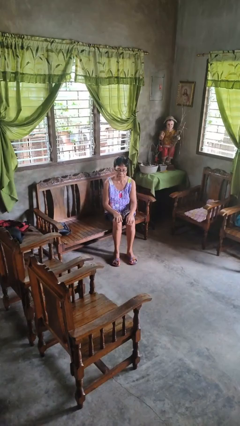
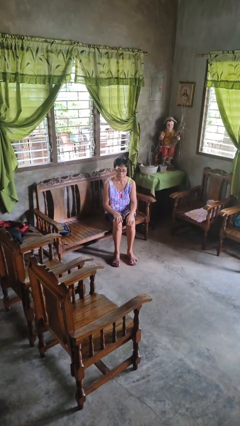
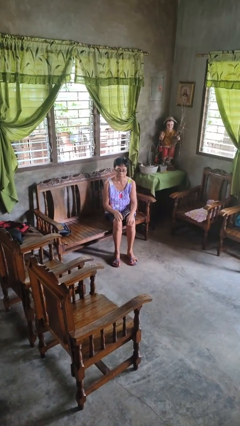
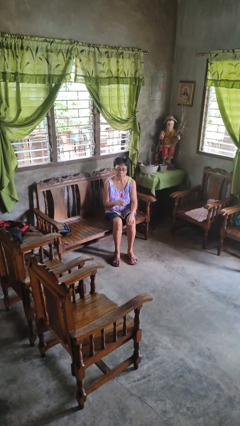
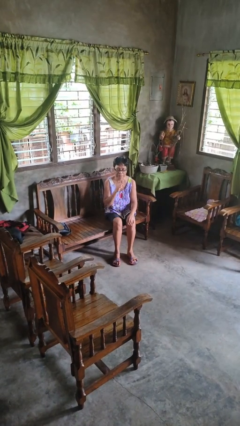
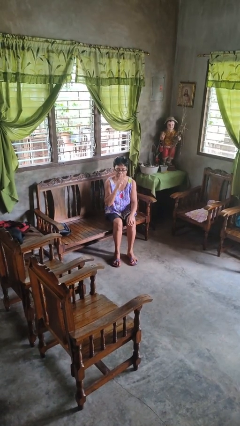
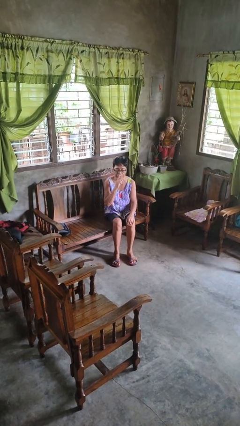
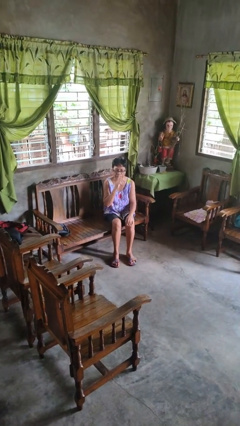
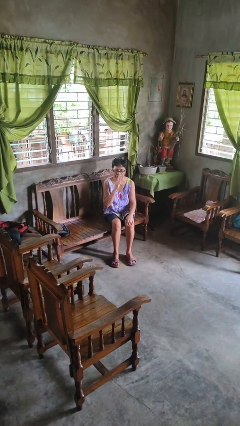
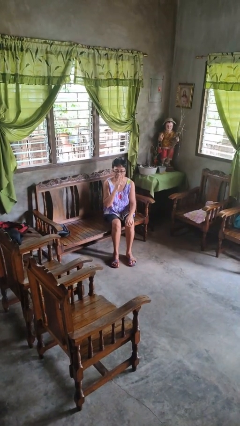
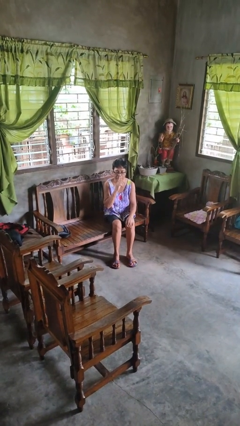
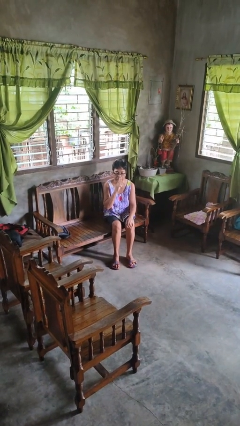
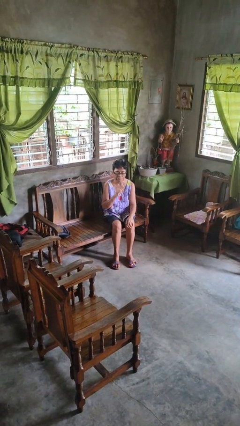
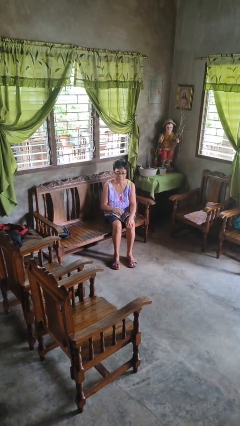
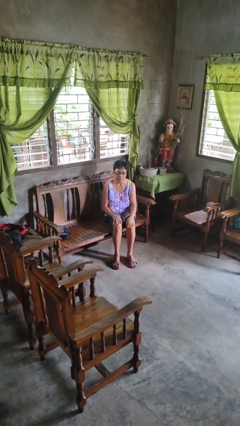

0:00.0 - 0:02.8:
person gestures be quiet

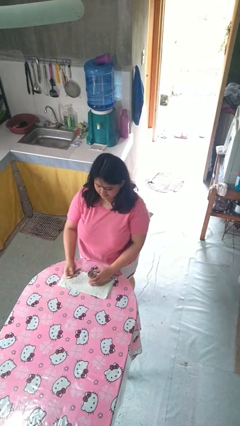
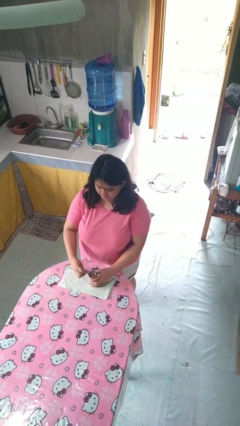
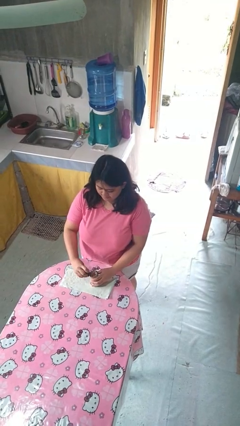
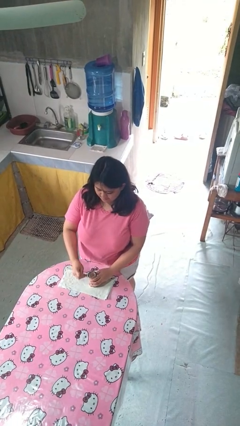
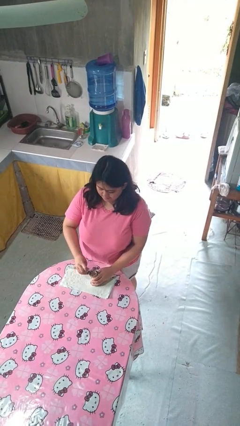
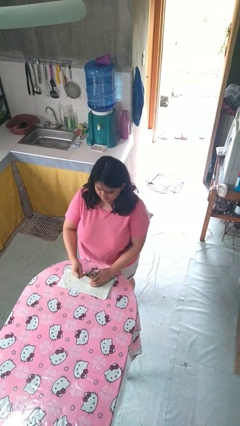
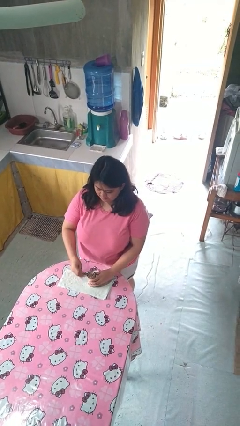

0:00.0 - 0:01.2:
person opens can with can opener

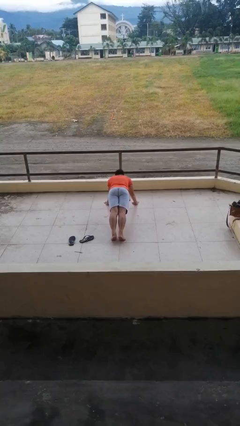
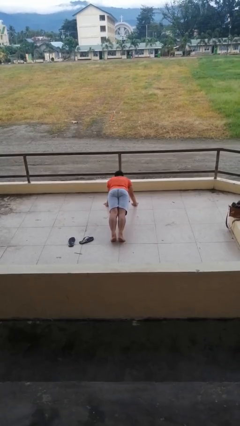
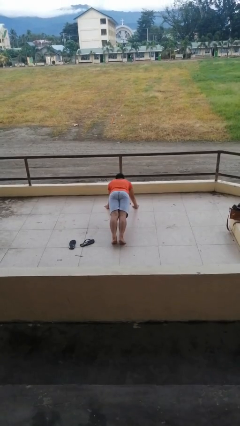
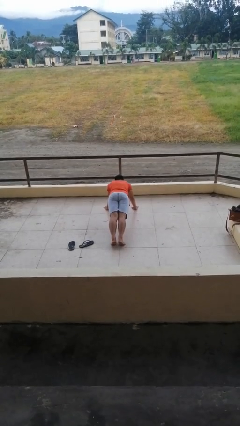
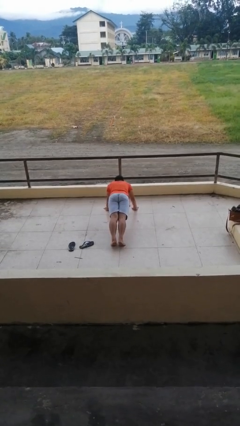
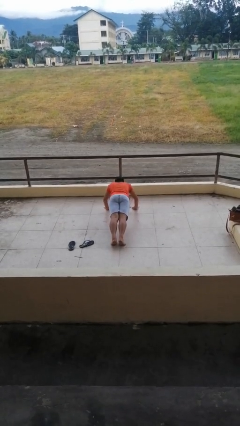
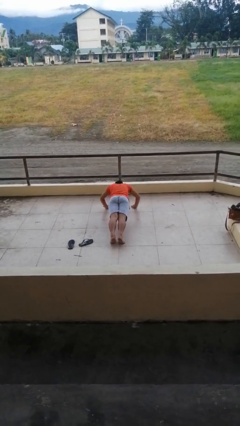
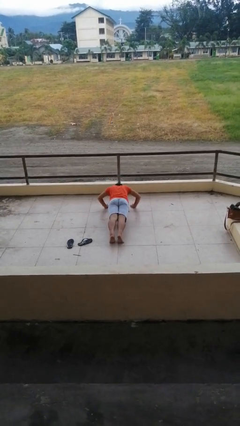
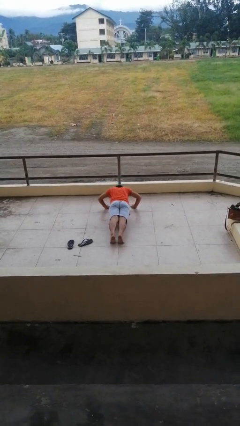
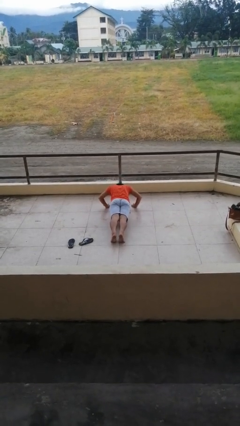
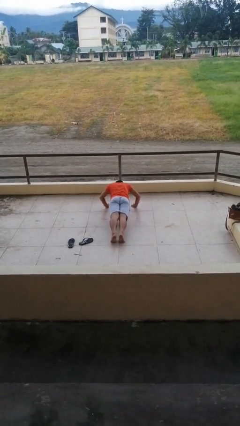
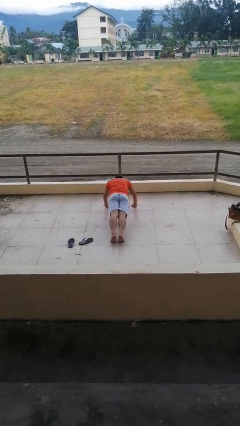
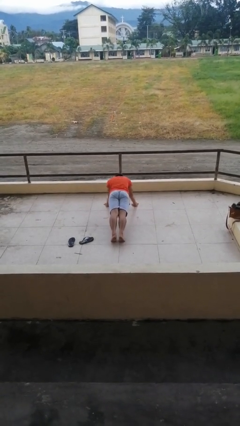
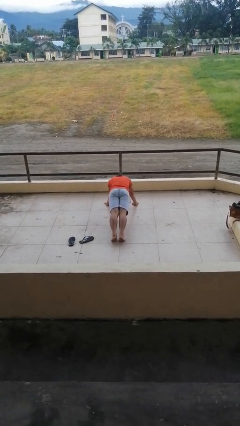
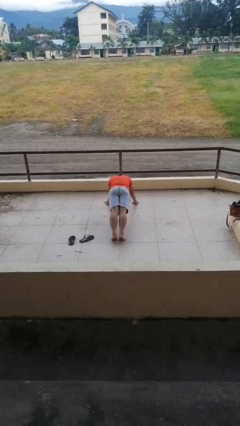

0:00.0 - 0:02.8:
person exercises with pushup

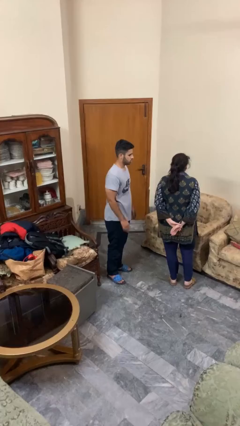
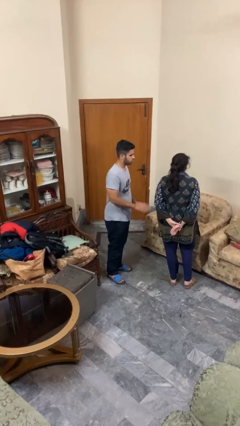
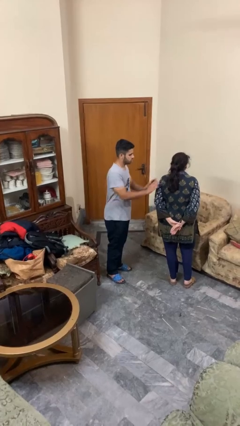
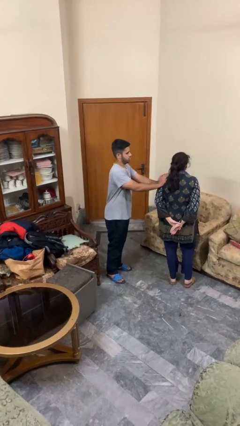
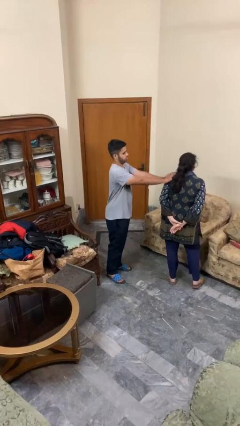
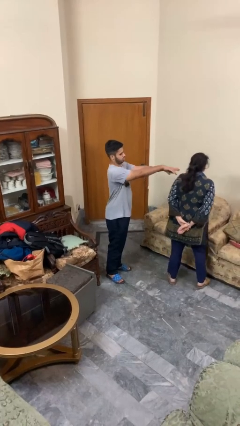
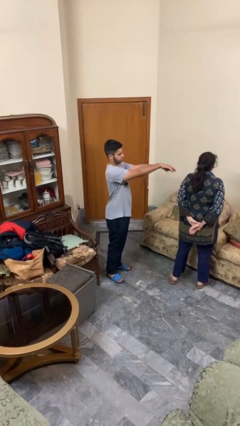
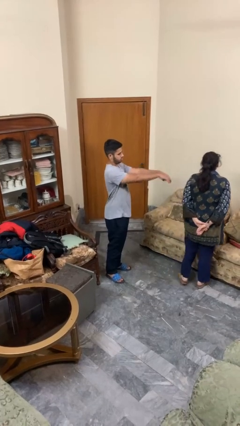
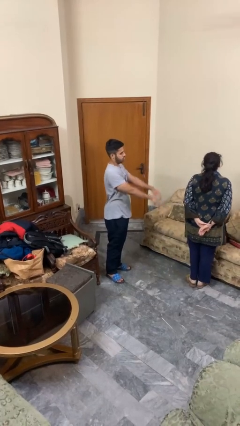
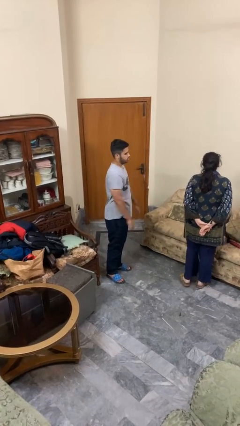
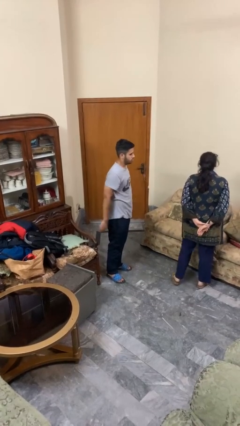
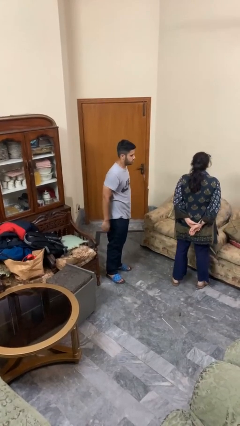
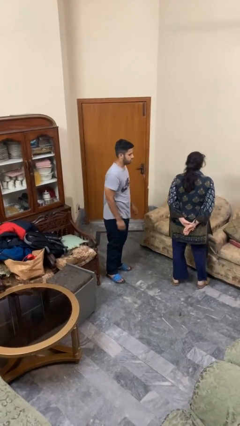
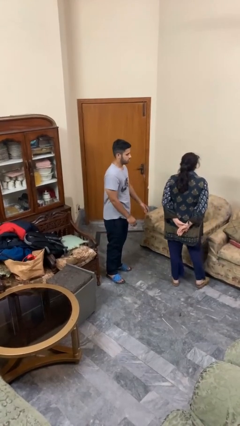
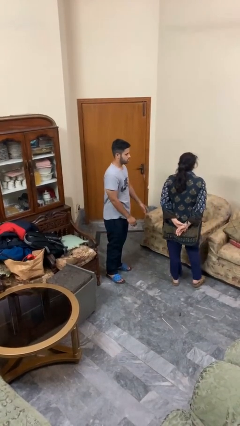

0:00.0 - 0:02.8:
person shoves person

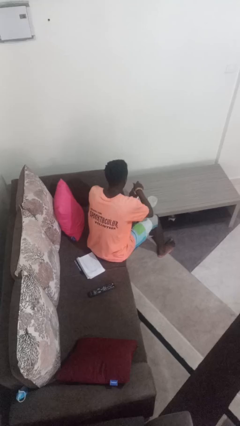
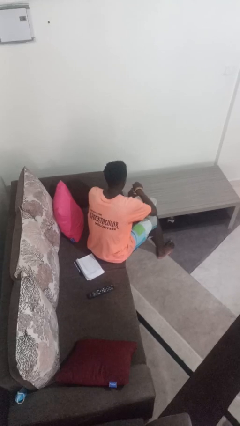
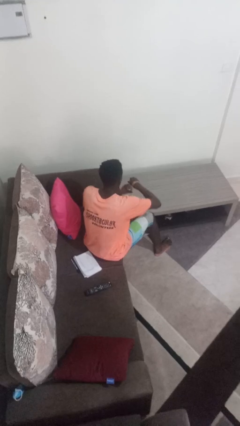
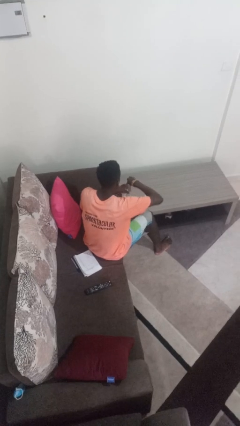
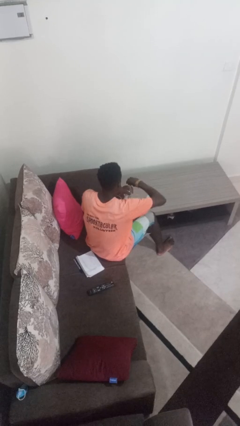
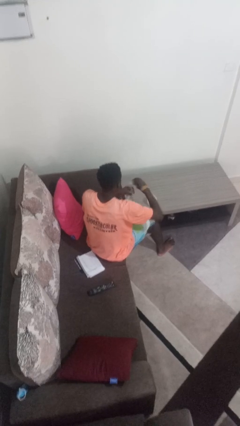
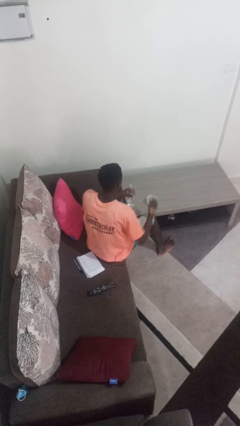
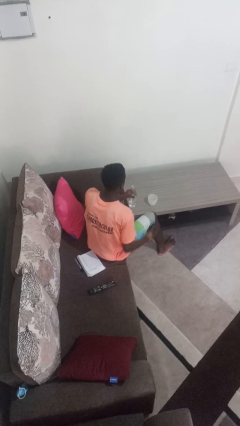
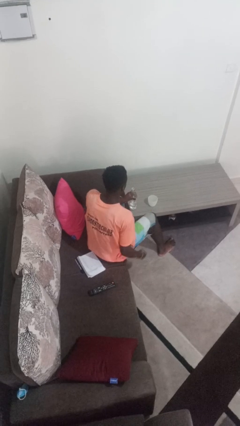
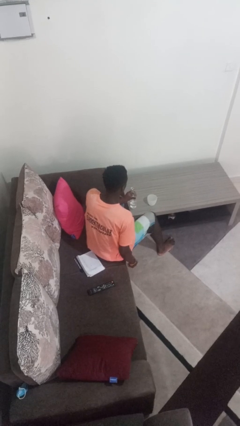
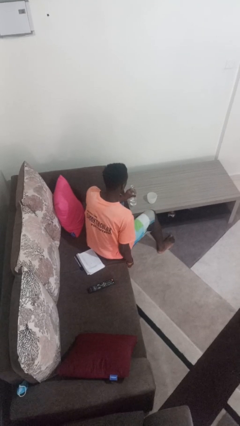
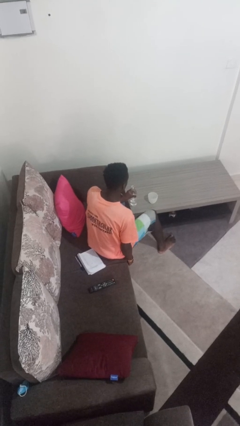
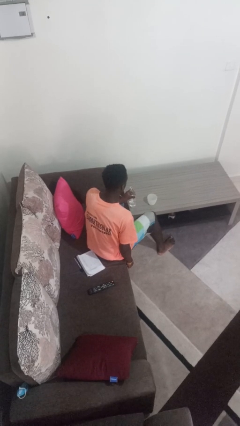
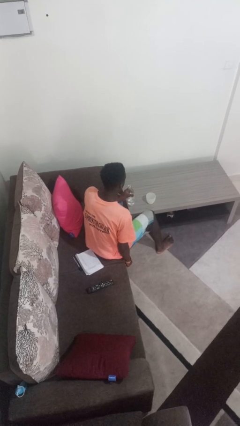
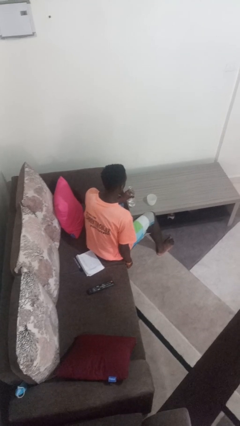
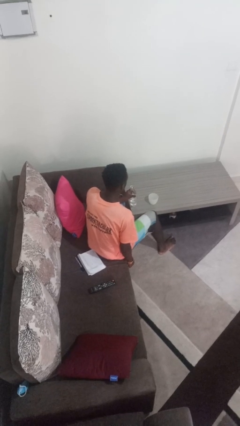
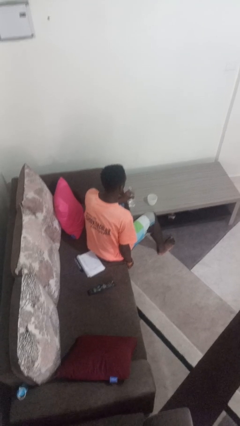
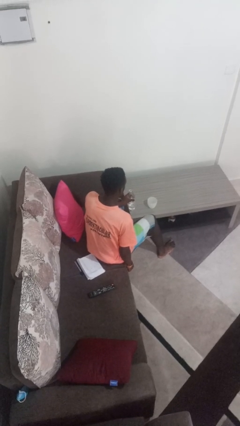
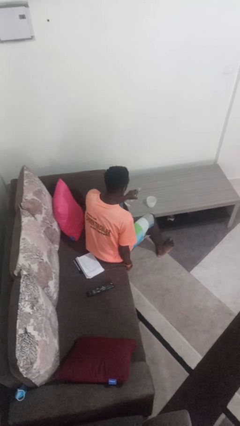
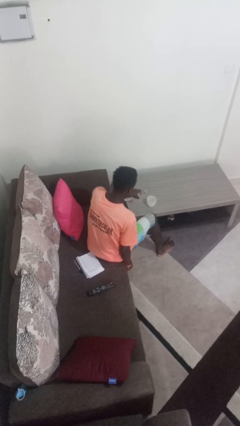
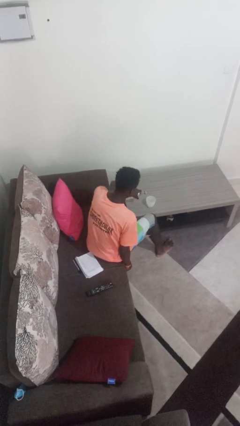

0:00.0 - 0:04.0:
person unscrews lid from bottle

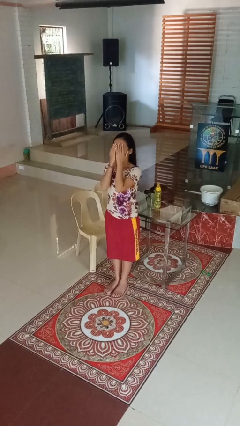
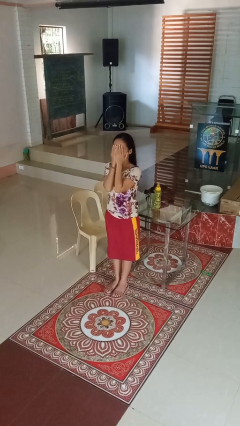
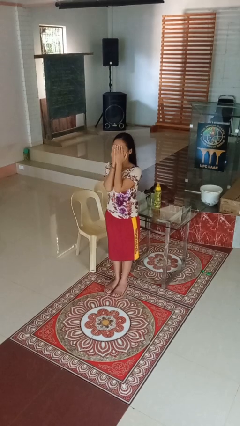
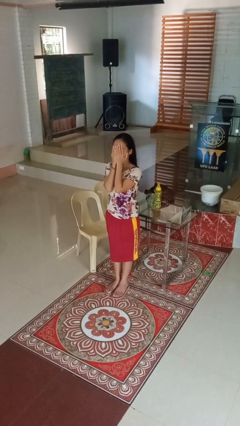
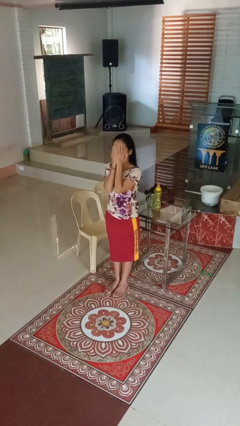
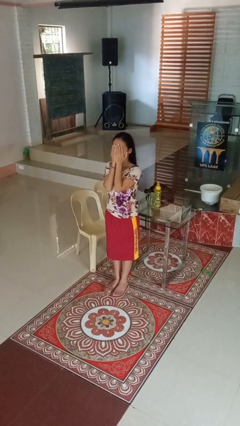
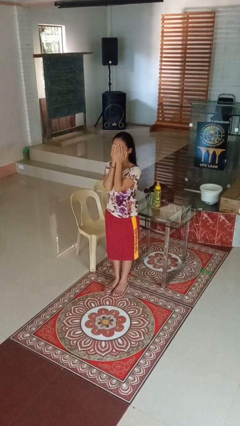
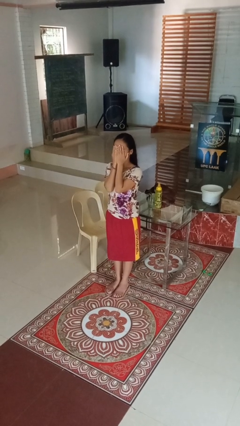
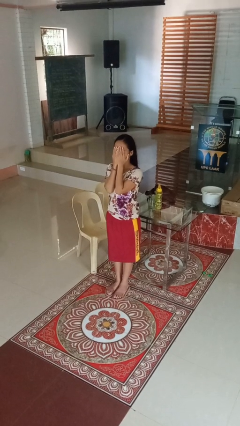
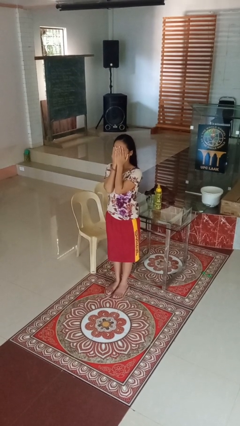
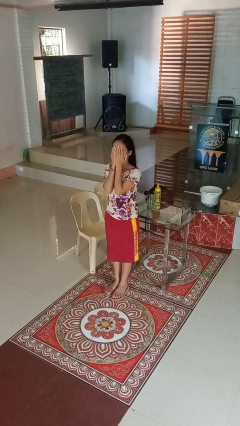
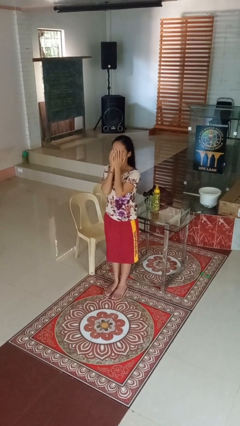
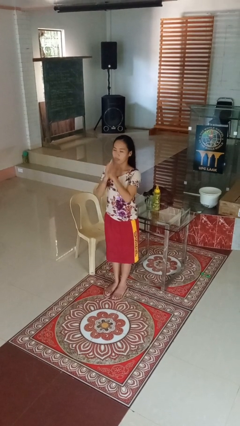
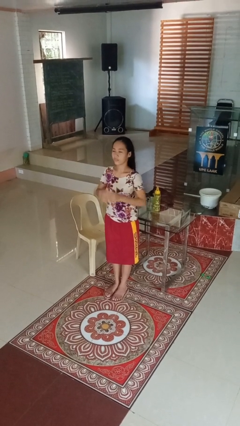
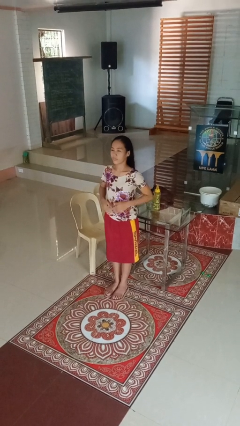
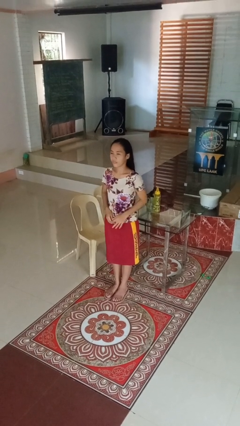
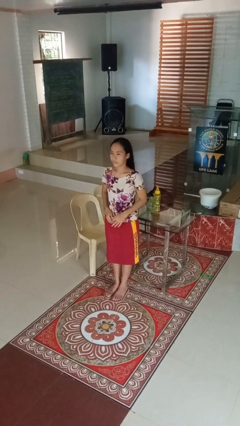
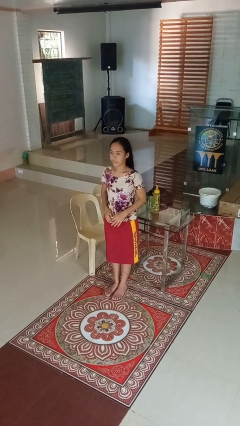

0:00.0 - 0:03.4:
person covers face with hands

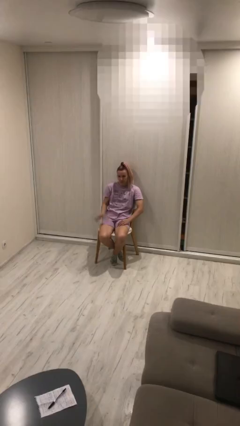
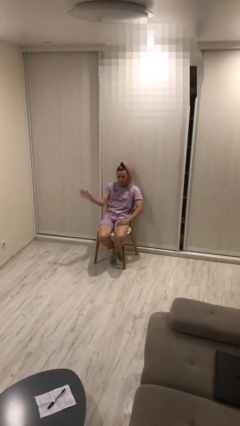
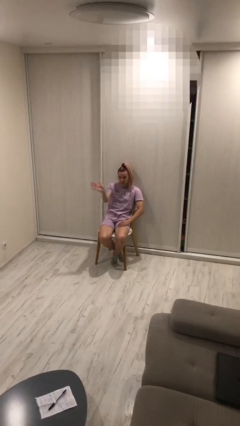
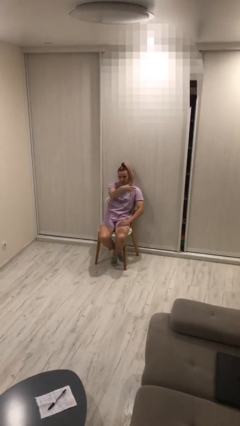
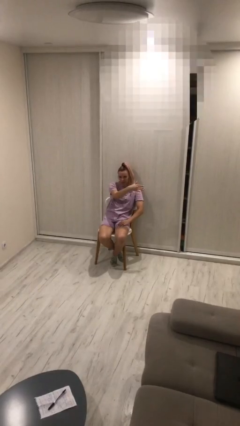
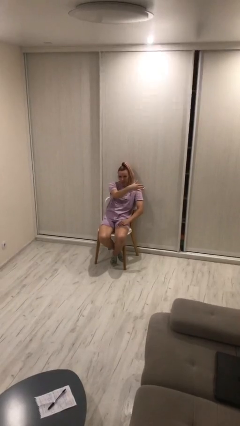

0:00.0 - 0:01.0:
person gestures swipe left
